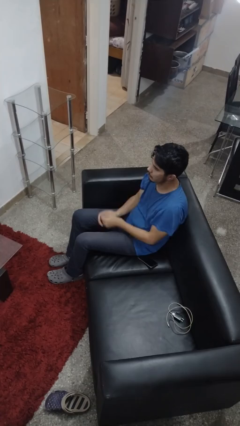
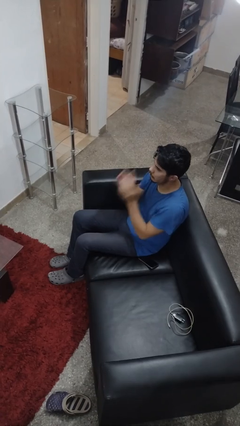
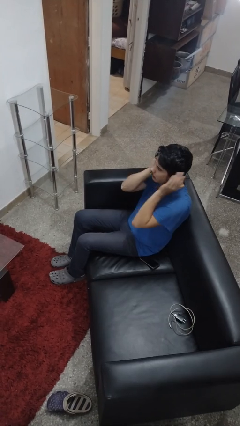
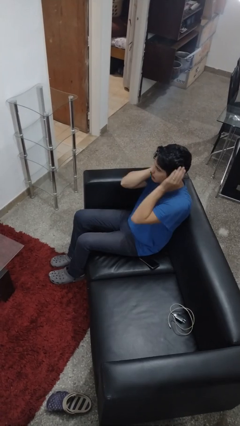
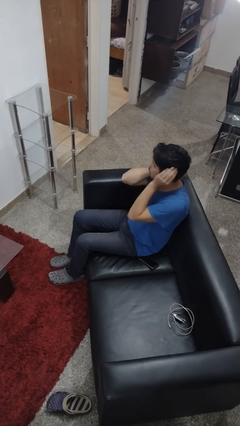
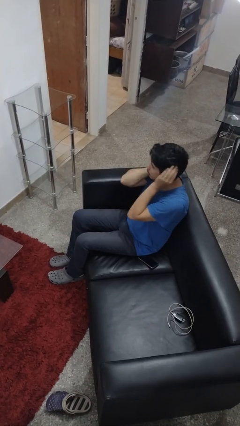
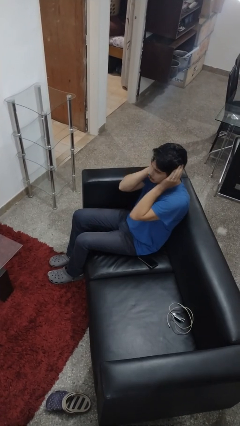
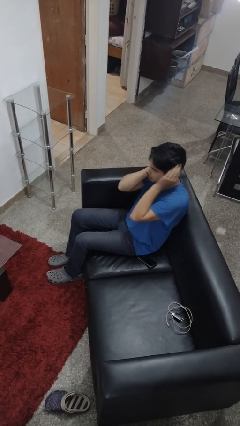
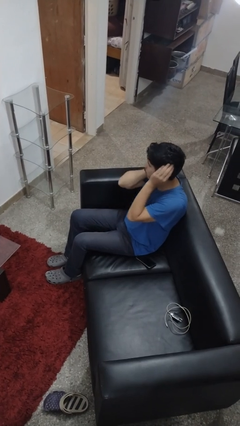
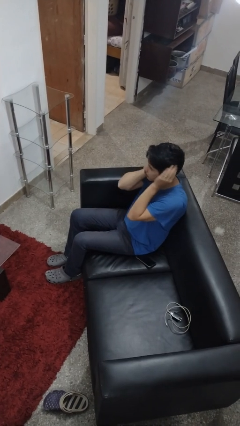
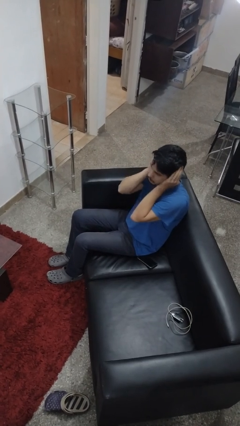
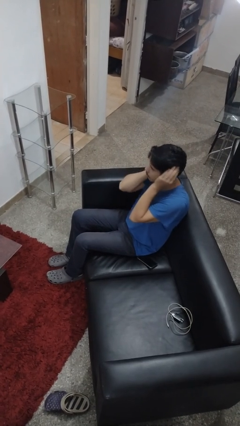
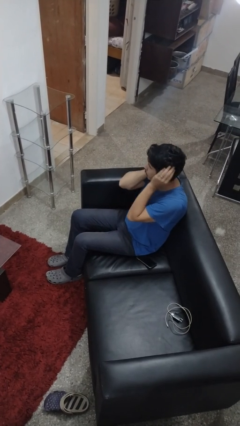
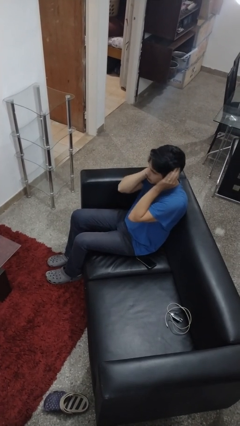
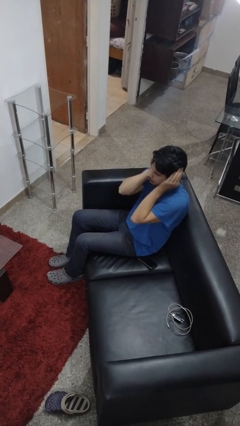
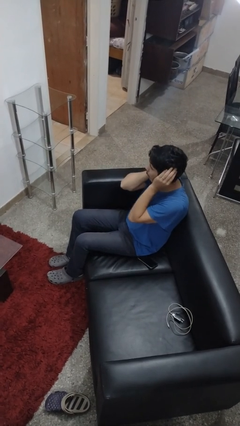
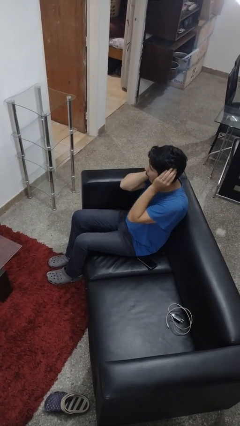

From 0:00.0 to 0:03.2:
person puts fingers in ear

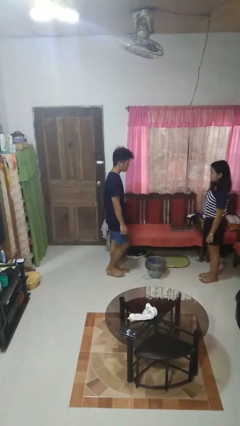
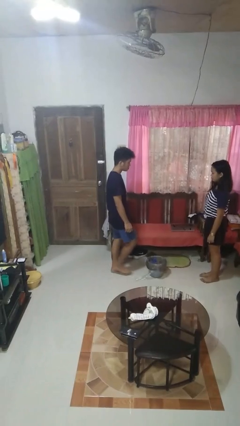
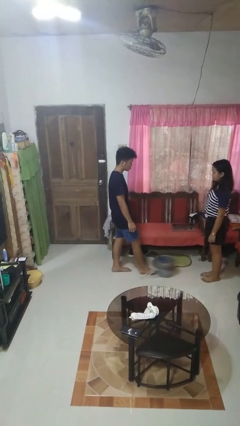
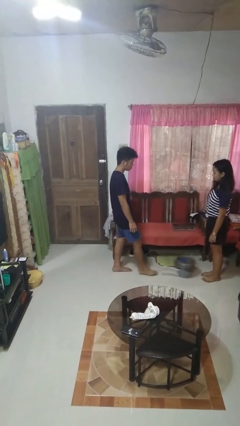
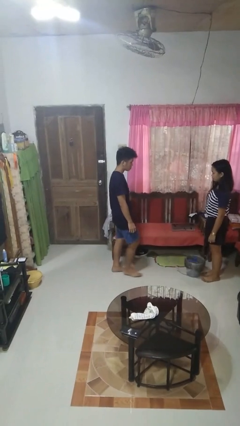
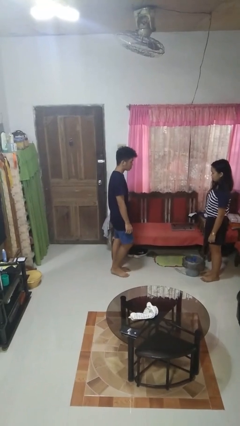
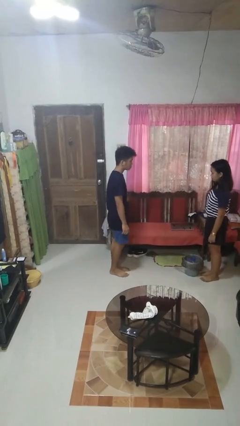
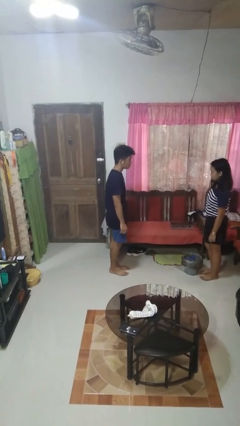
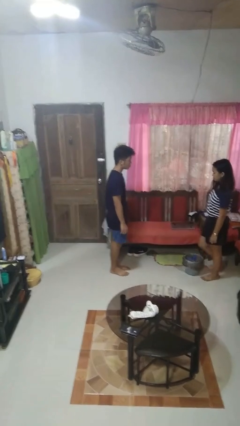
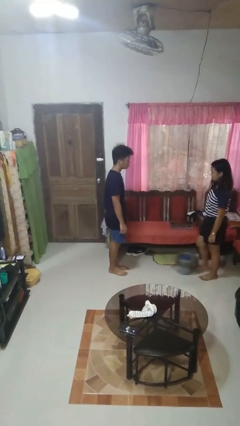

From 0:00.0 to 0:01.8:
person kicks object to person

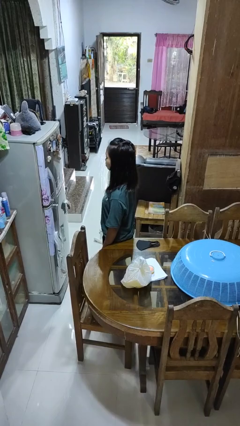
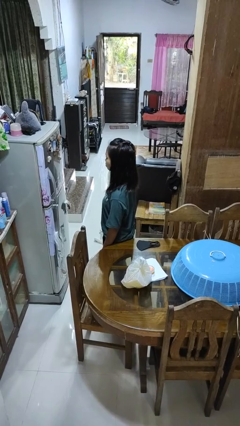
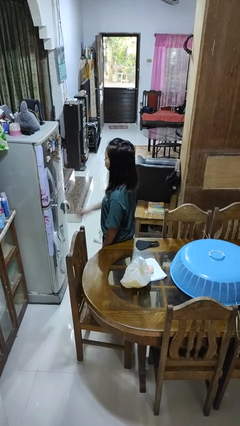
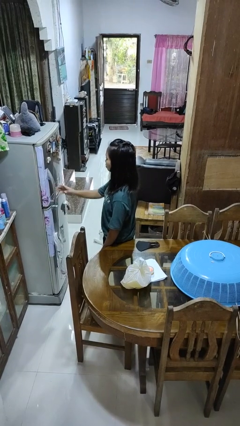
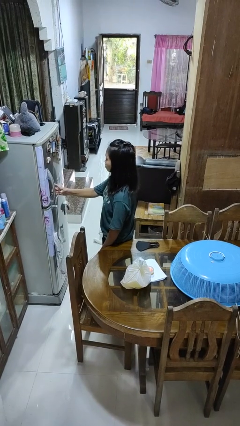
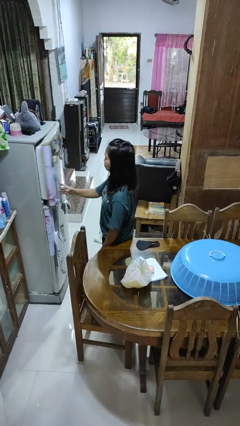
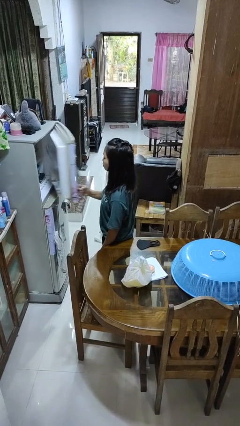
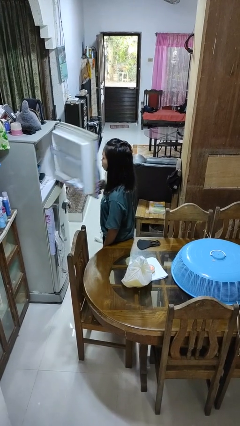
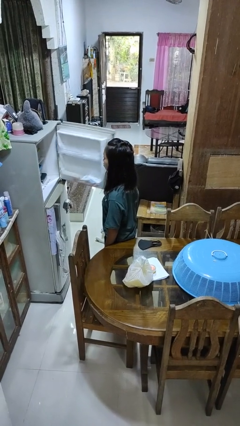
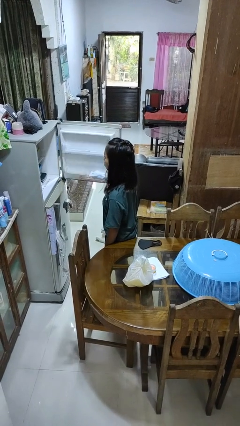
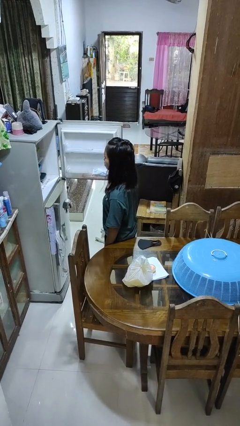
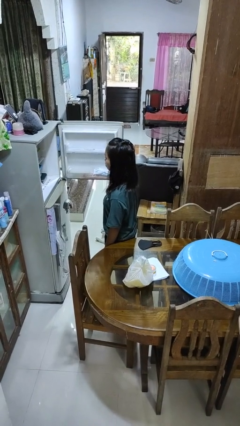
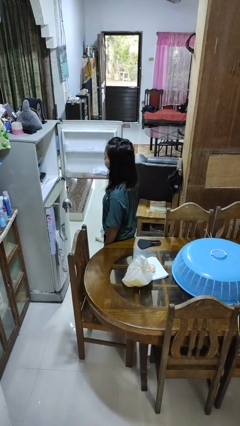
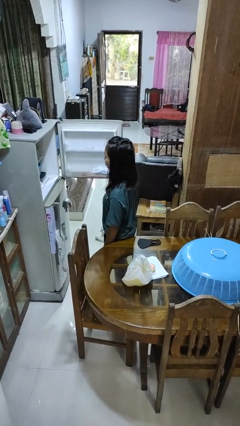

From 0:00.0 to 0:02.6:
person opens refrigerator

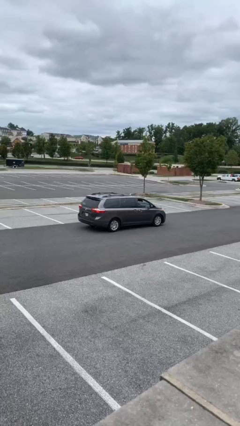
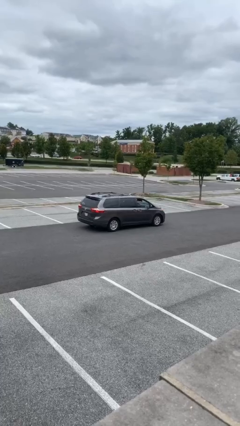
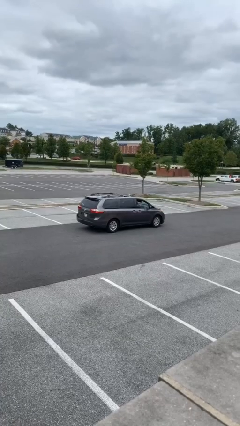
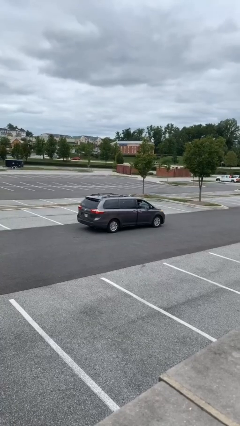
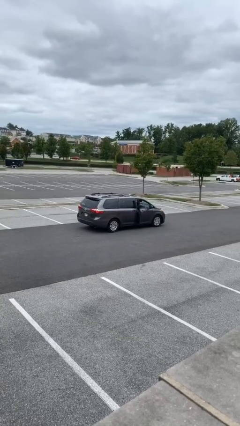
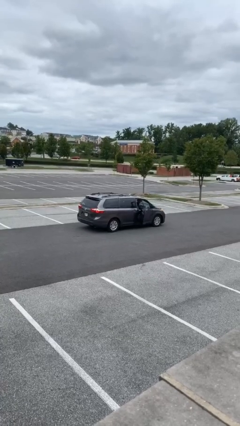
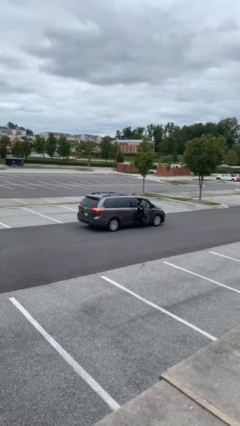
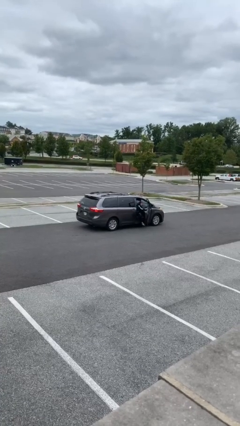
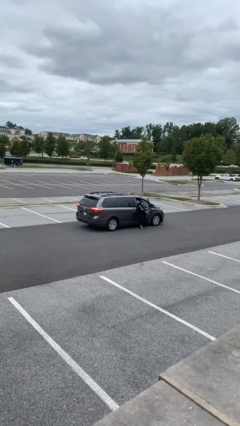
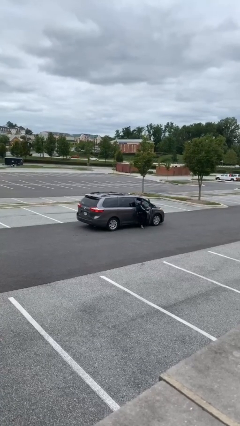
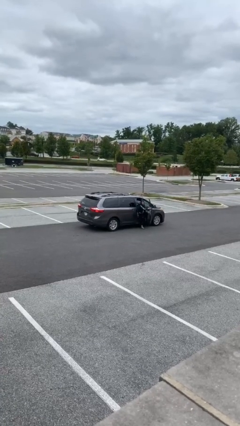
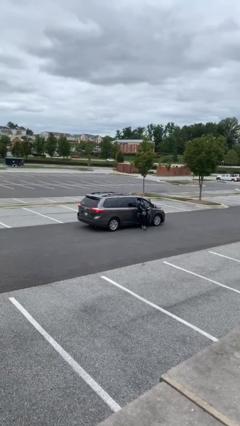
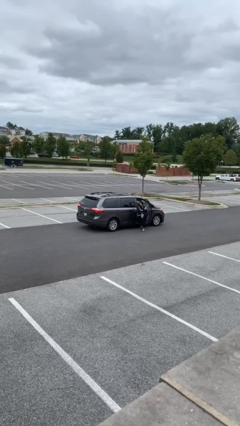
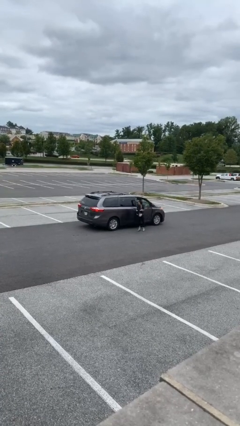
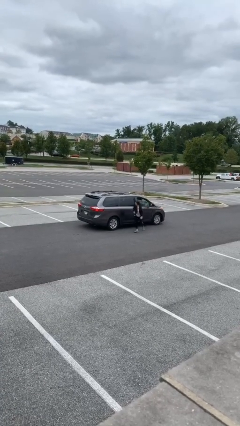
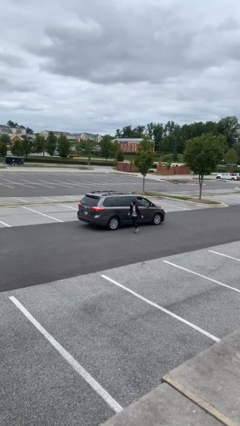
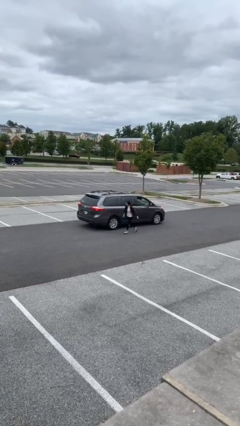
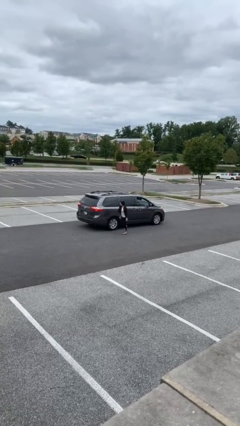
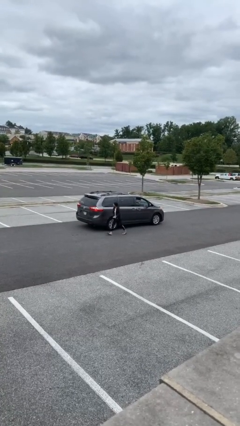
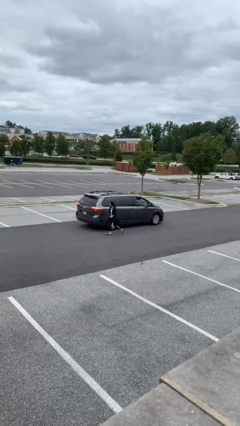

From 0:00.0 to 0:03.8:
car drops off person

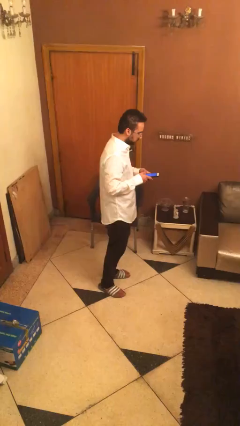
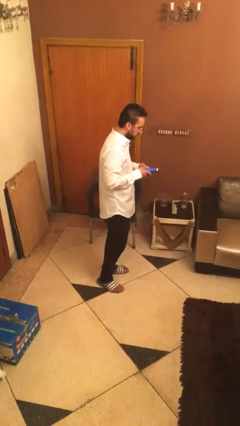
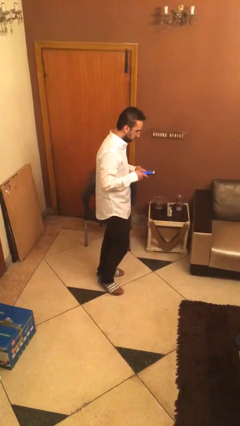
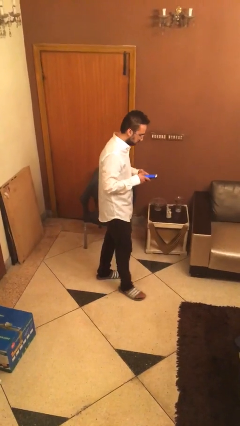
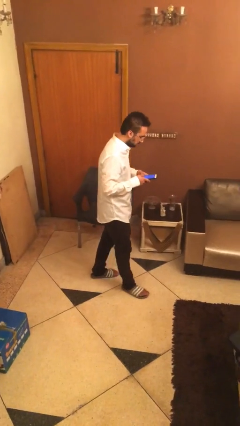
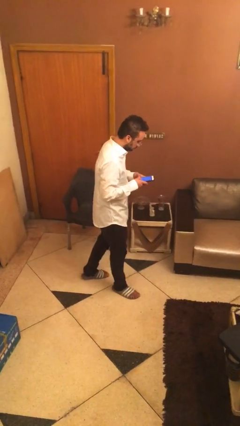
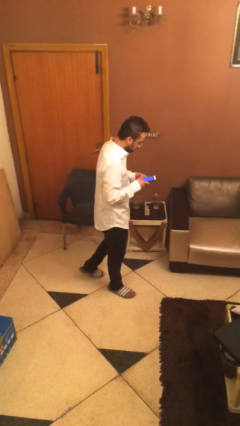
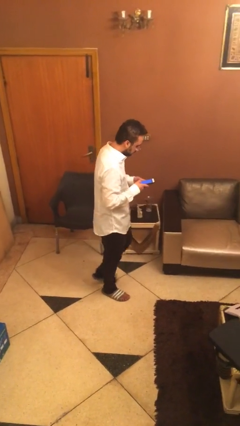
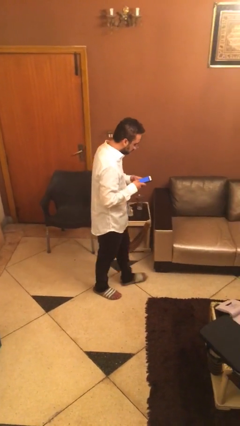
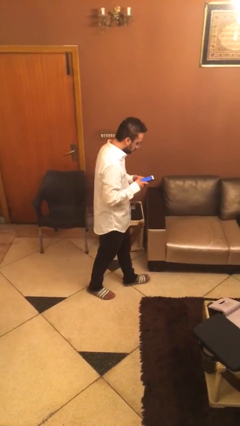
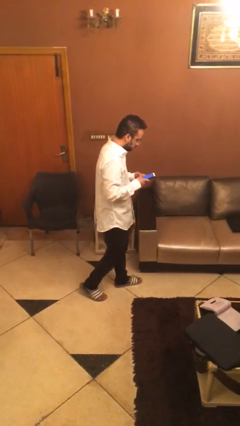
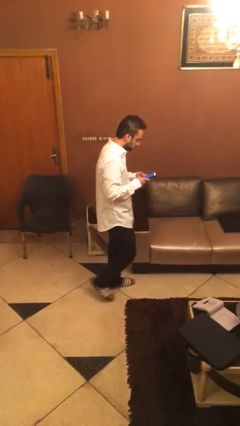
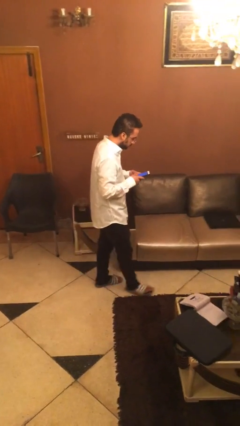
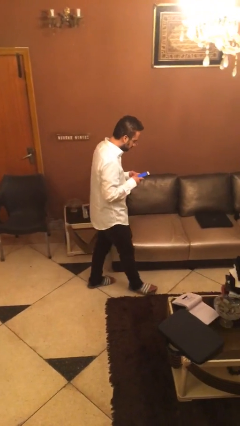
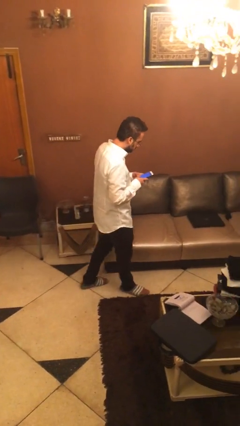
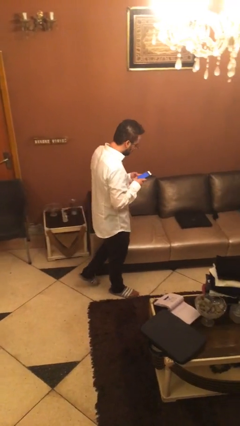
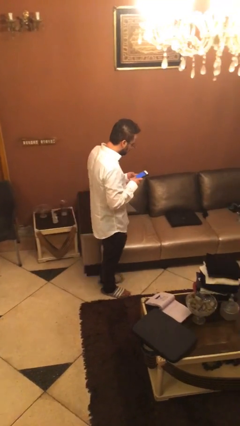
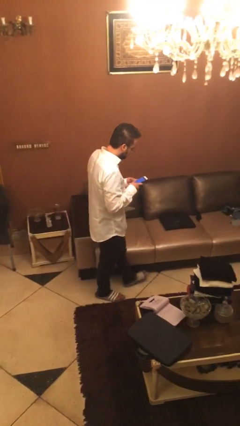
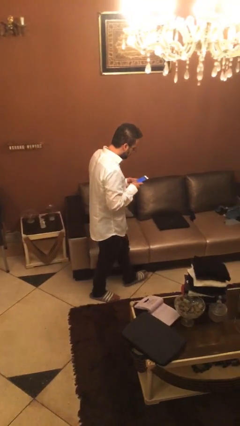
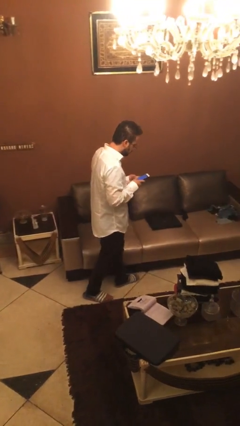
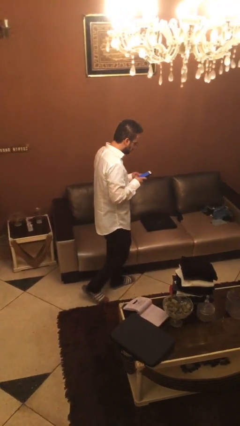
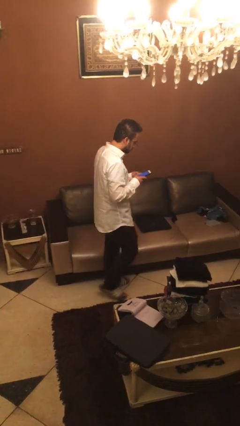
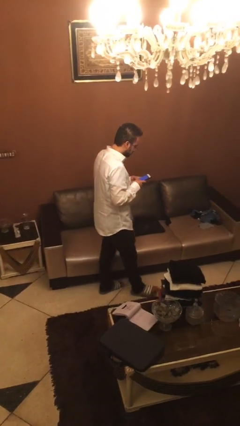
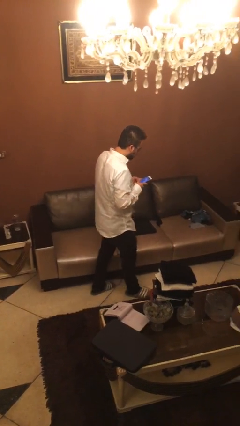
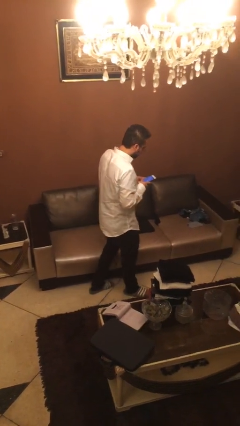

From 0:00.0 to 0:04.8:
person texts on phone

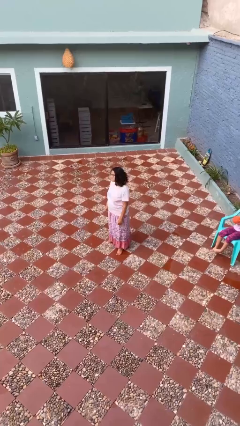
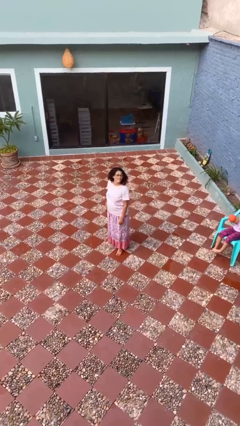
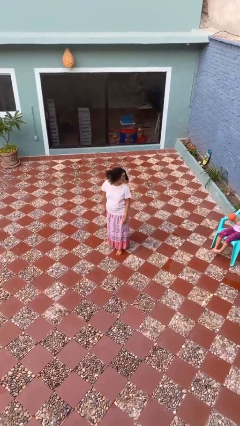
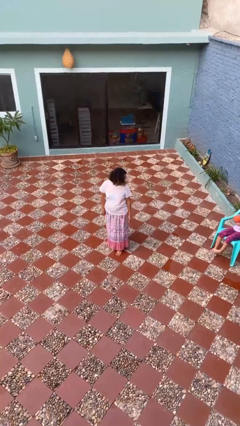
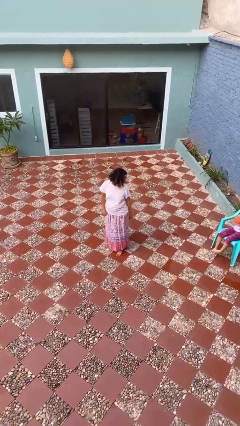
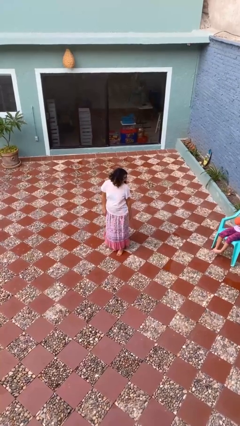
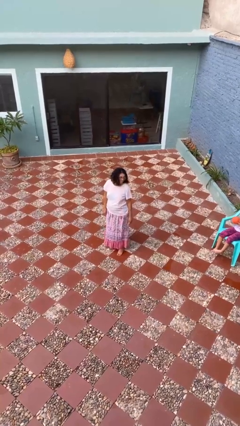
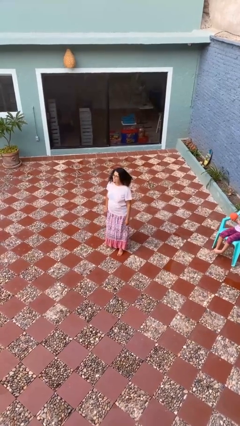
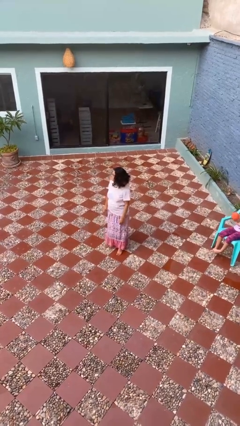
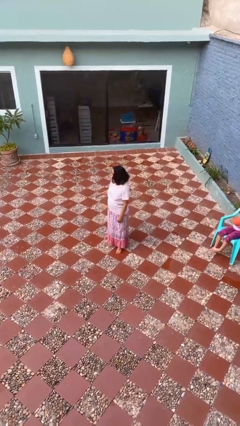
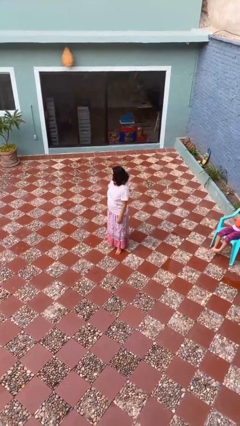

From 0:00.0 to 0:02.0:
person looks over shoulder
